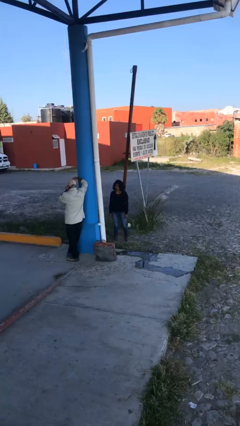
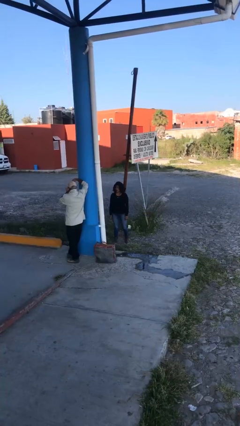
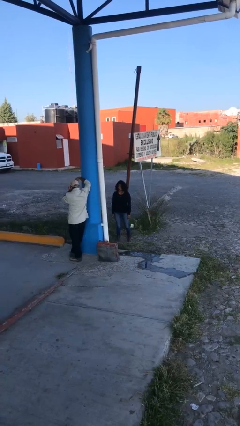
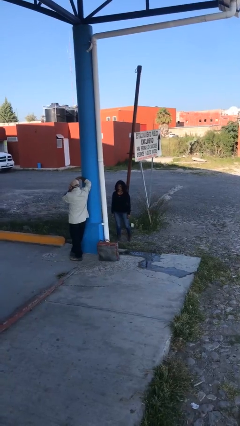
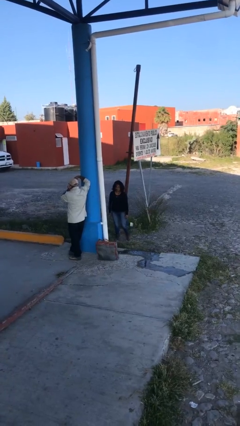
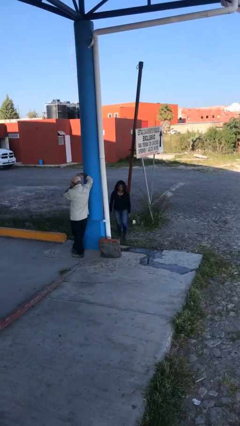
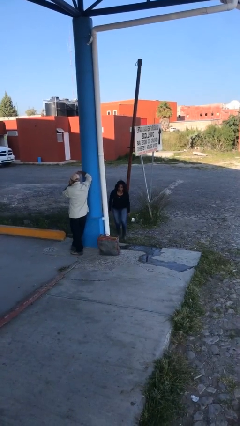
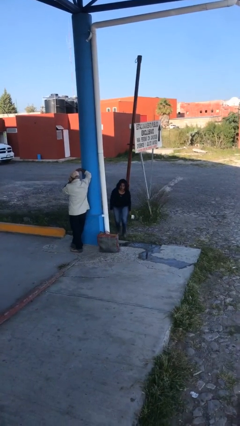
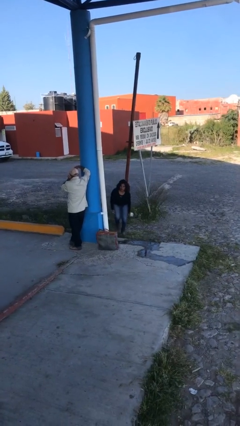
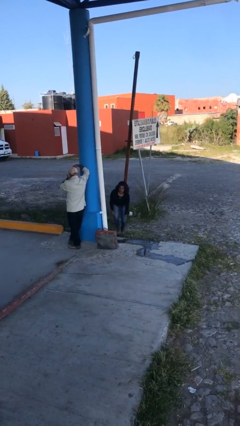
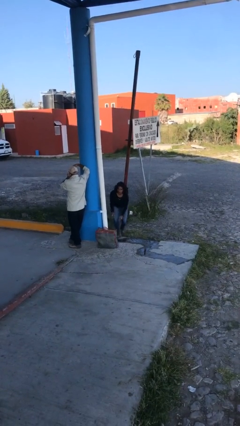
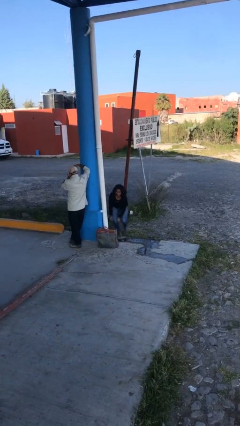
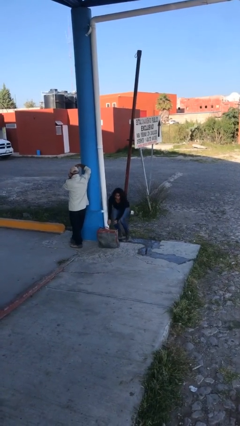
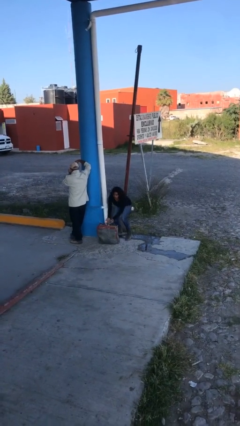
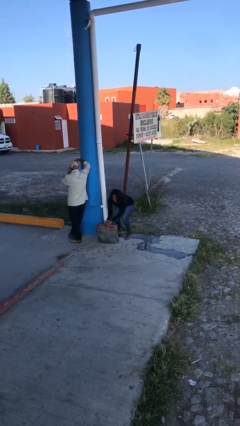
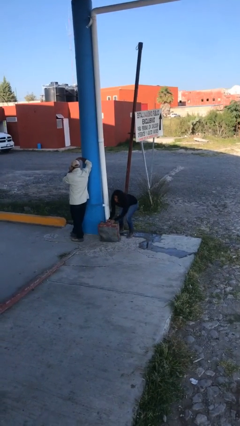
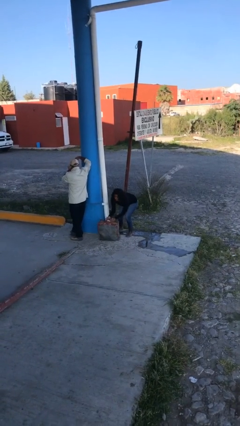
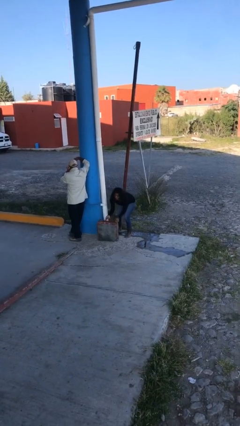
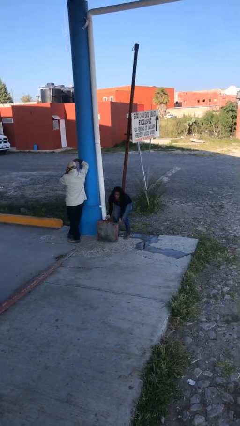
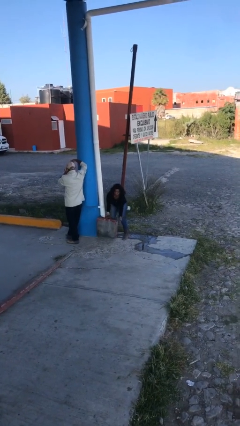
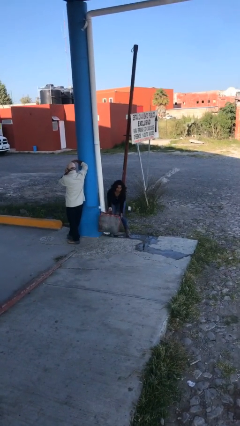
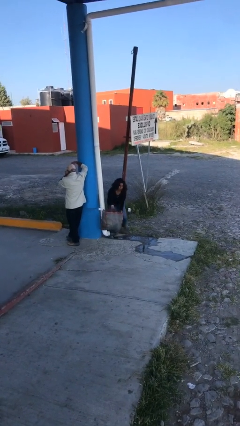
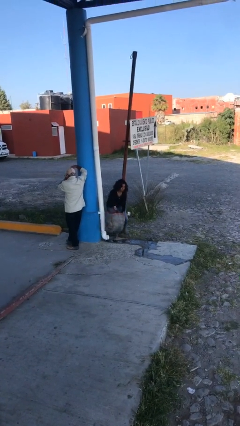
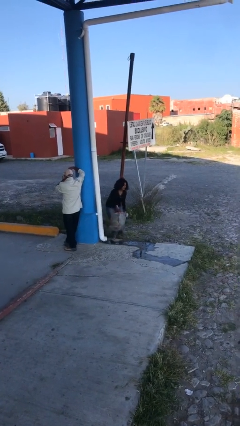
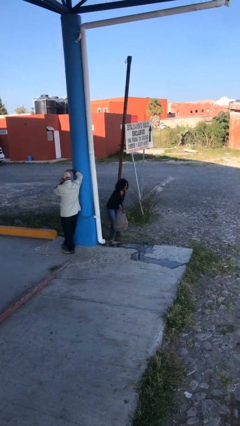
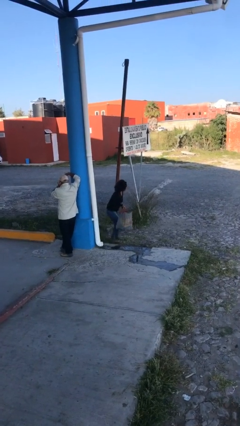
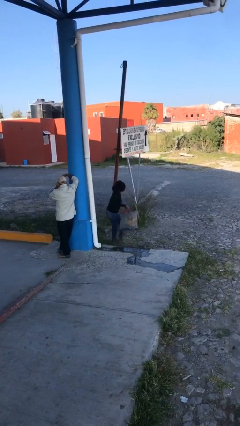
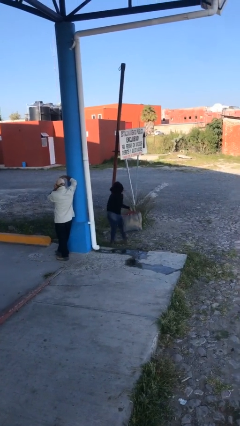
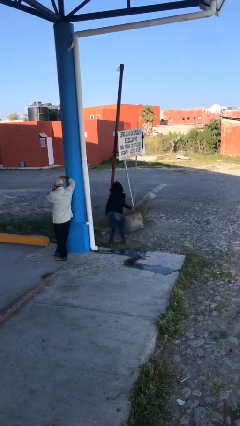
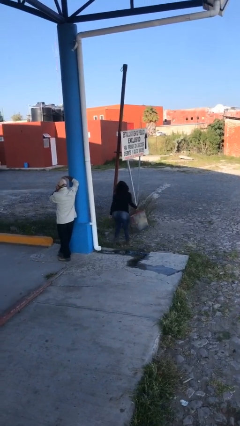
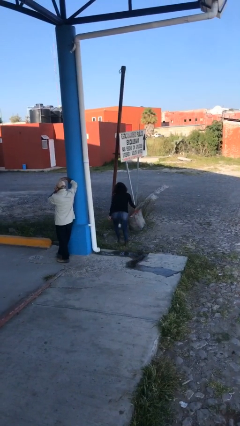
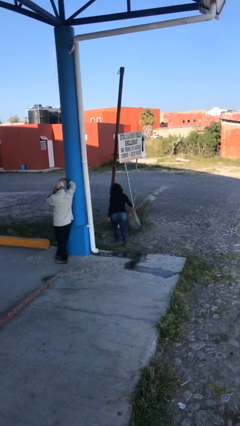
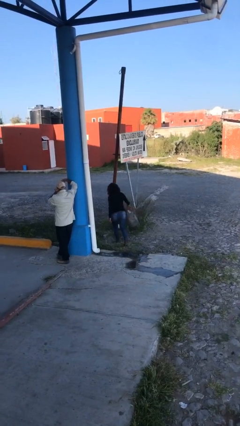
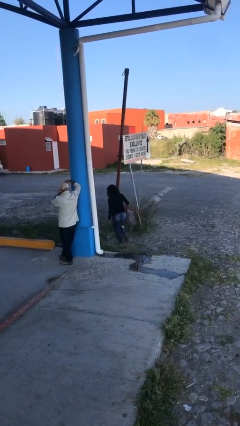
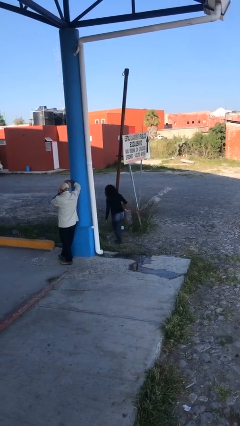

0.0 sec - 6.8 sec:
person steals object from person

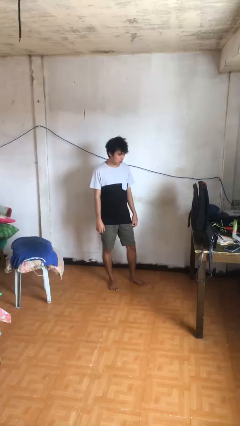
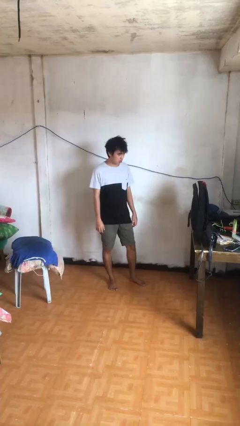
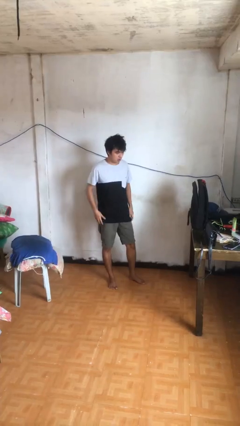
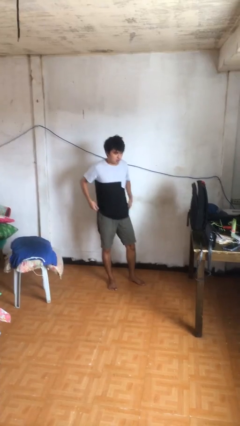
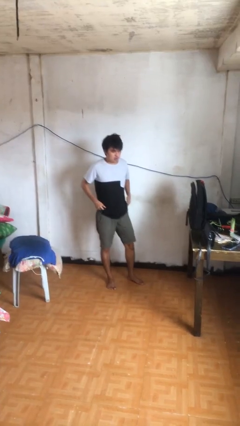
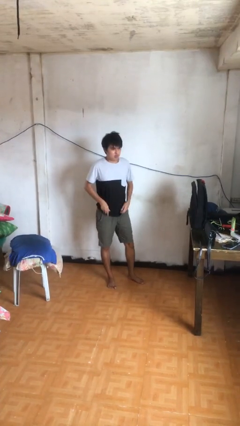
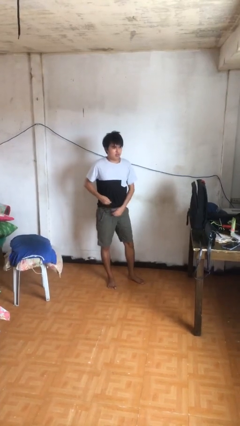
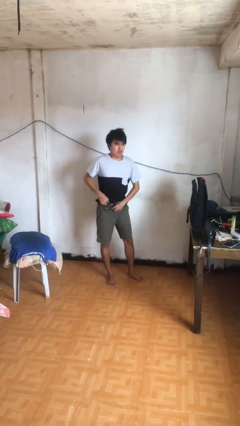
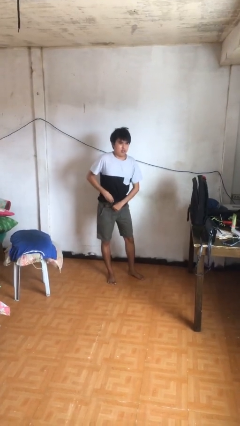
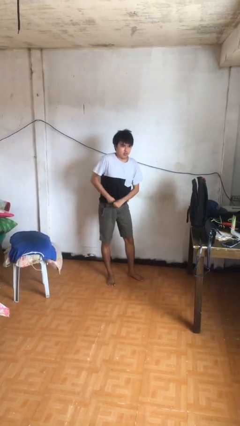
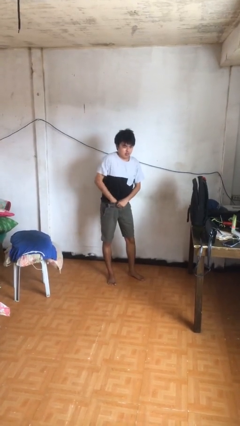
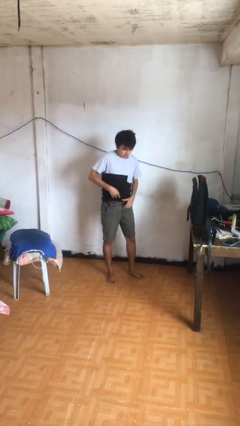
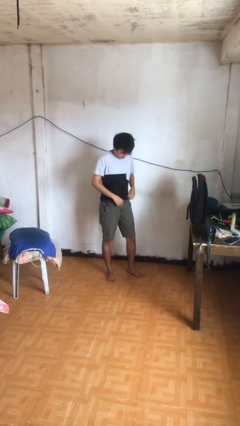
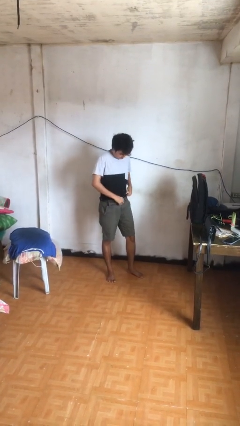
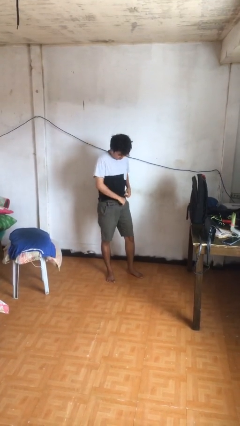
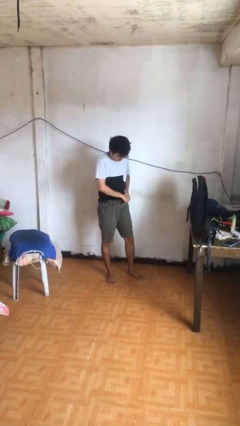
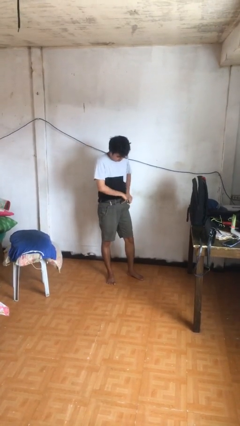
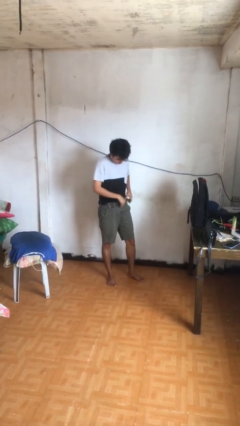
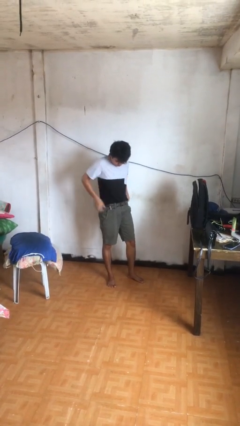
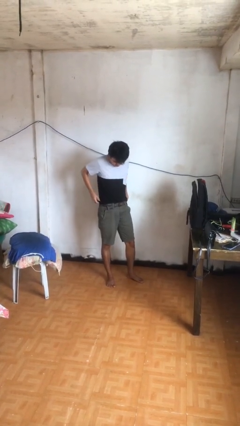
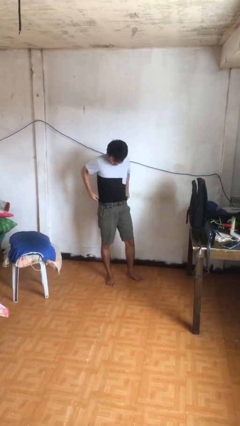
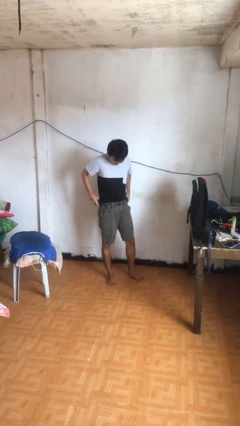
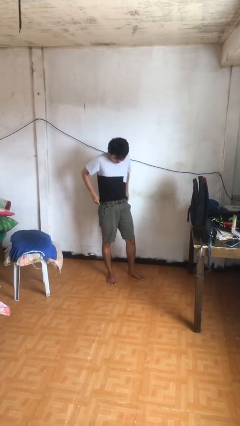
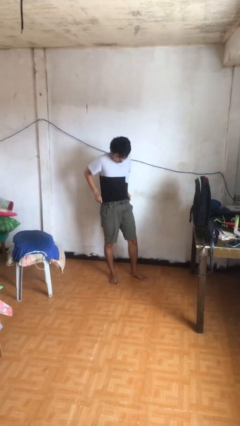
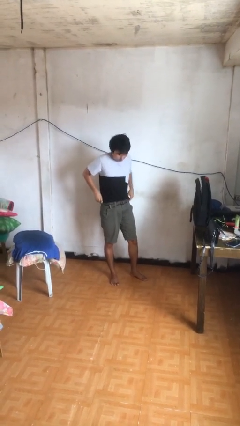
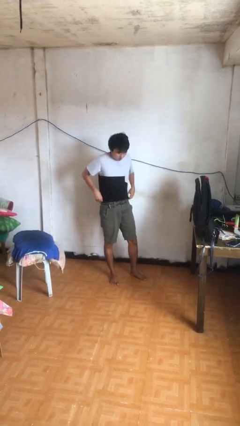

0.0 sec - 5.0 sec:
person tucks in shirt

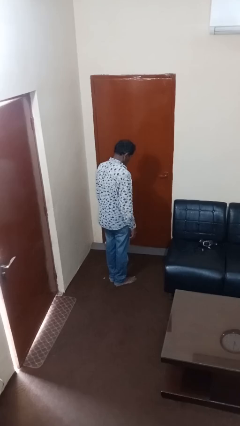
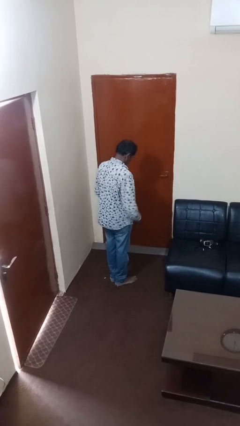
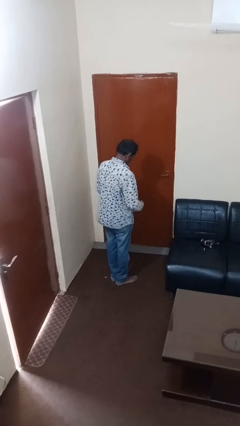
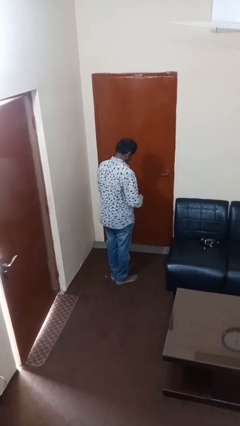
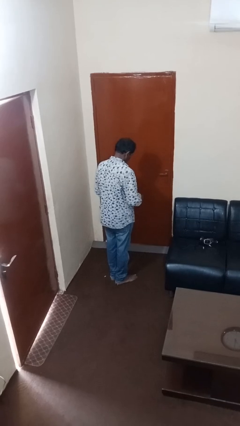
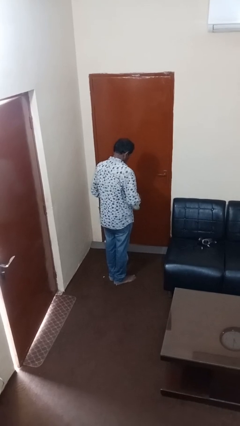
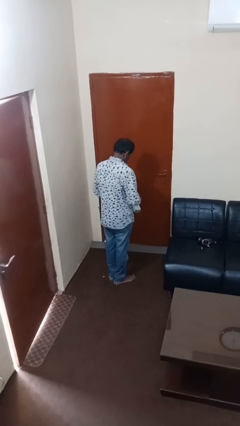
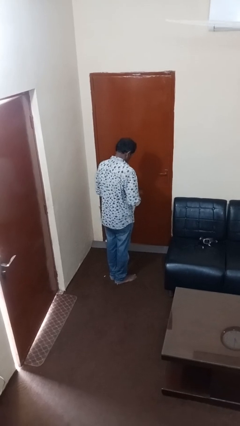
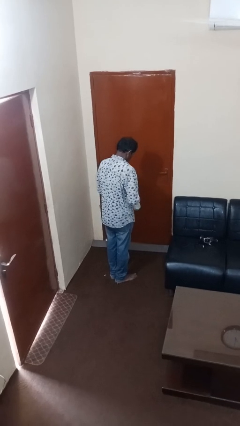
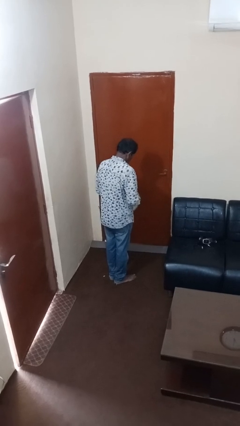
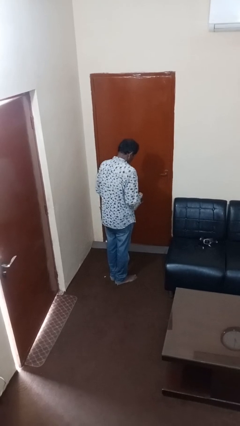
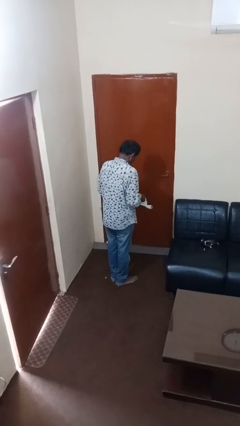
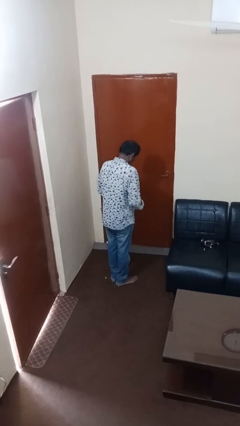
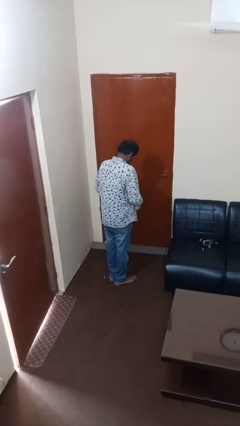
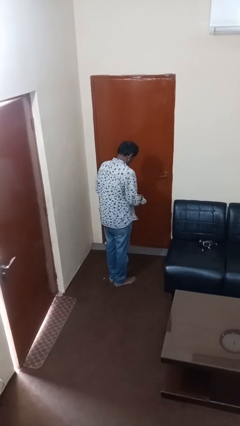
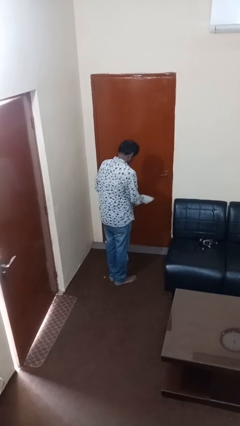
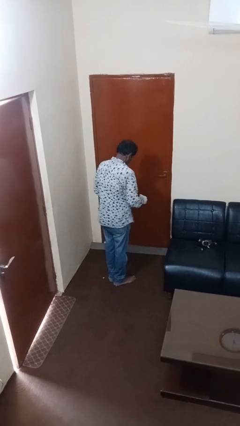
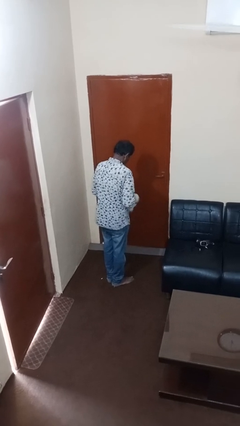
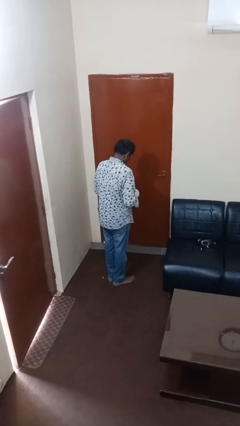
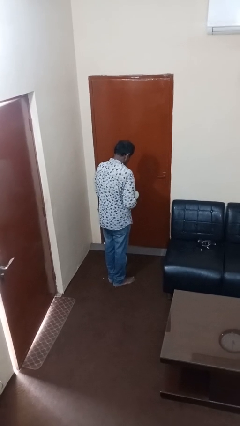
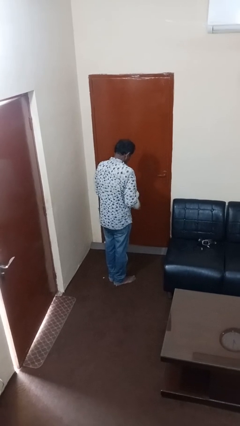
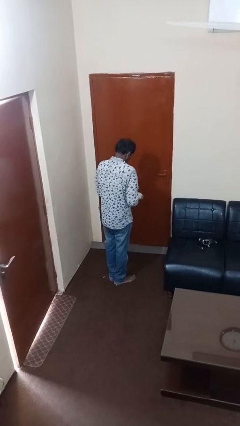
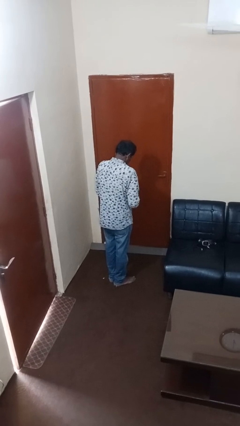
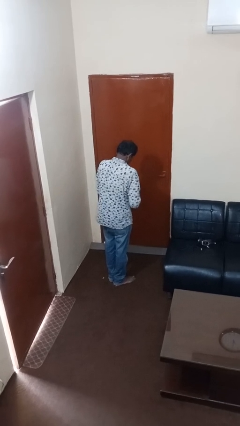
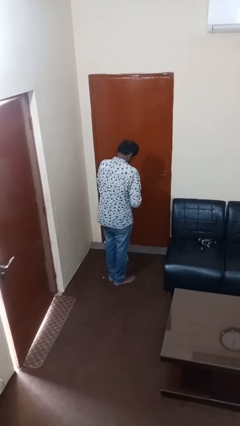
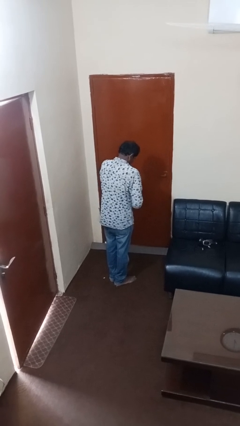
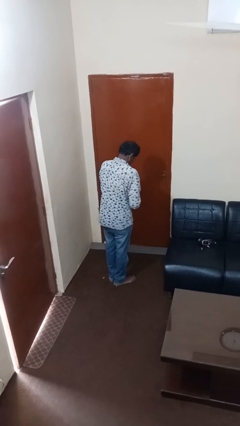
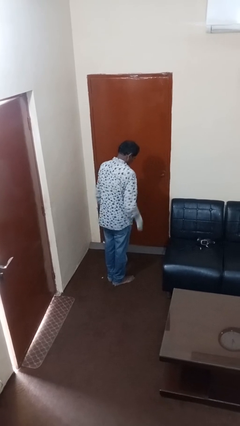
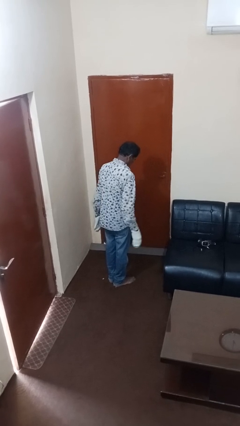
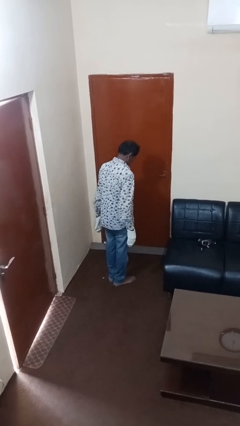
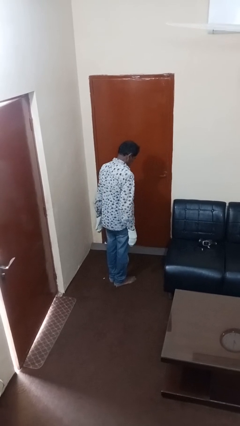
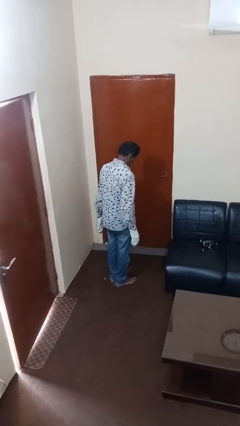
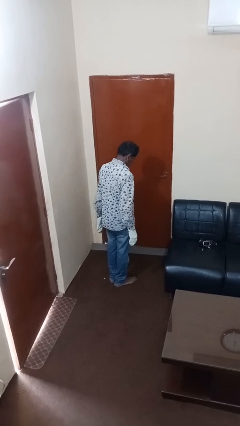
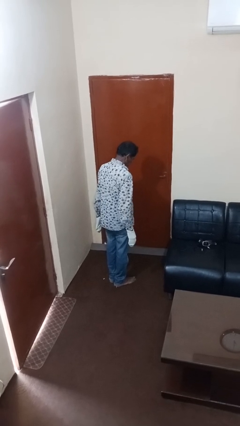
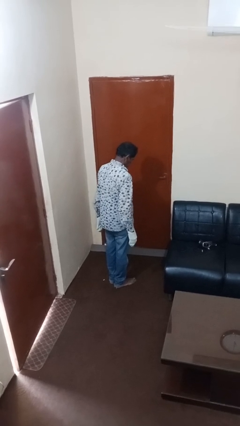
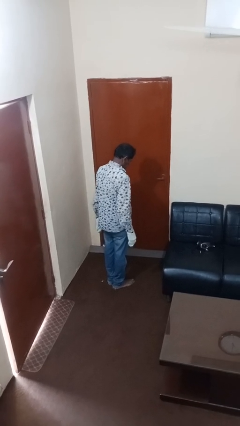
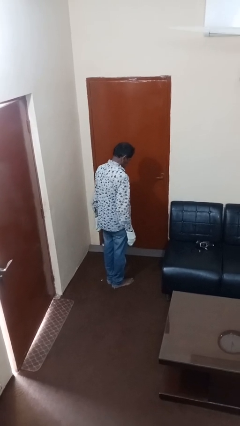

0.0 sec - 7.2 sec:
person puts on gloves
